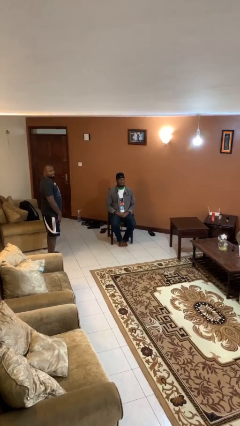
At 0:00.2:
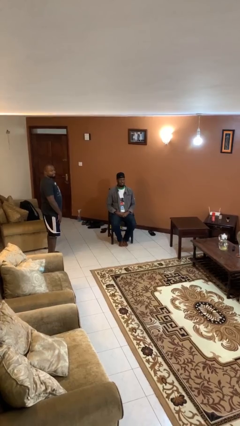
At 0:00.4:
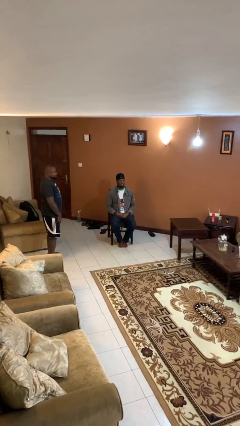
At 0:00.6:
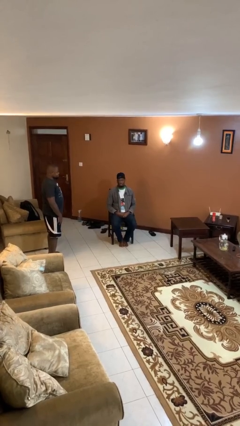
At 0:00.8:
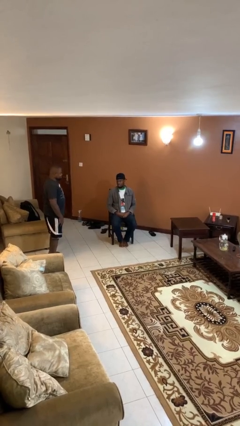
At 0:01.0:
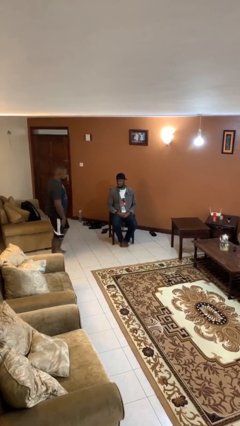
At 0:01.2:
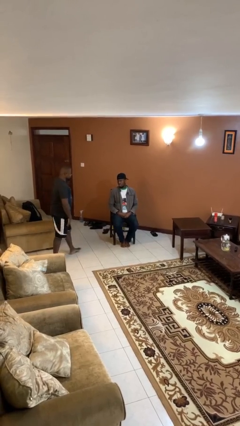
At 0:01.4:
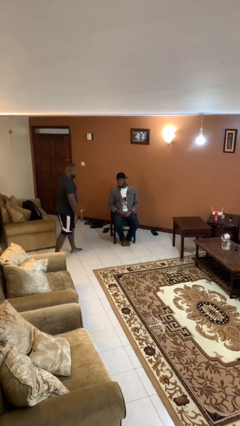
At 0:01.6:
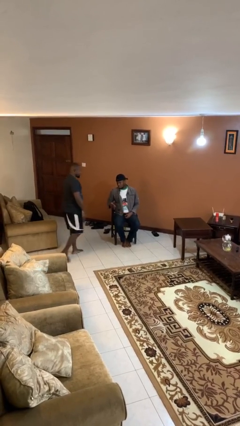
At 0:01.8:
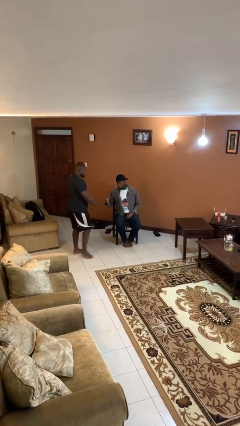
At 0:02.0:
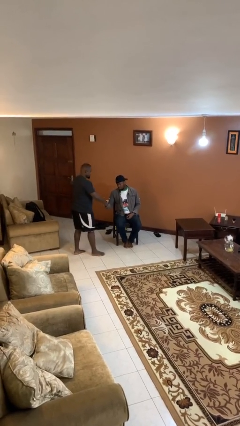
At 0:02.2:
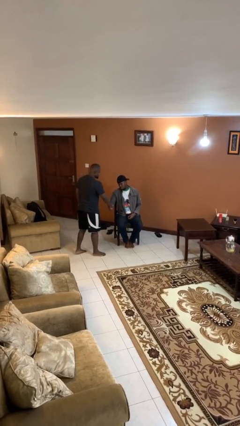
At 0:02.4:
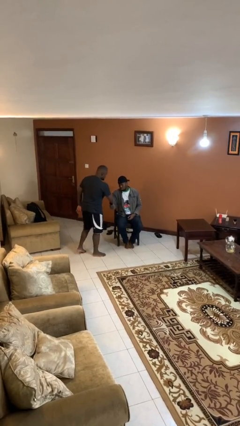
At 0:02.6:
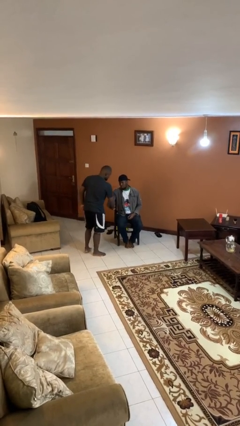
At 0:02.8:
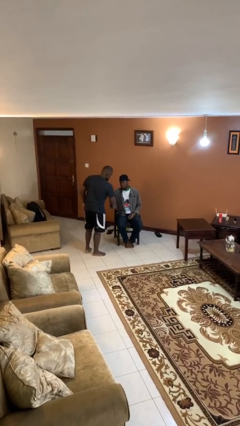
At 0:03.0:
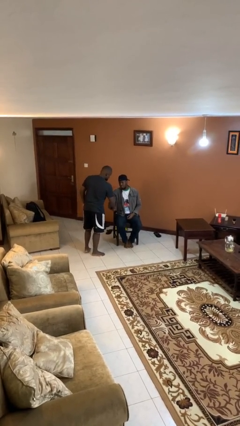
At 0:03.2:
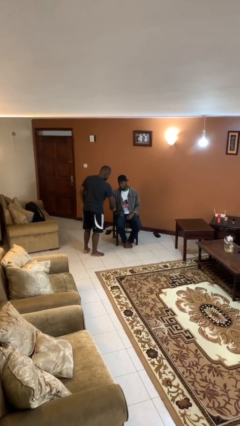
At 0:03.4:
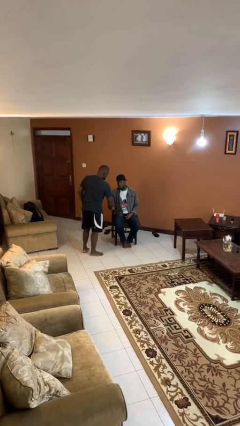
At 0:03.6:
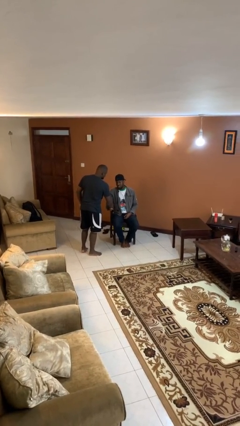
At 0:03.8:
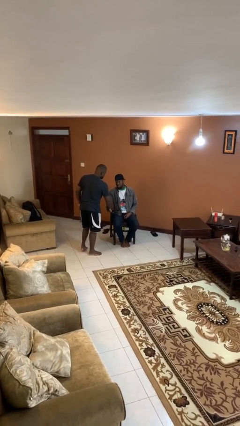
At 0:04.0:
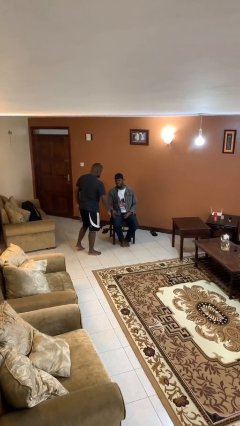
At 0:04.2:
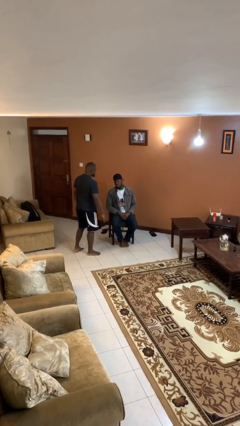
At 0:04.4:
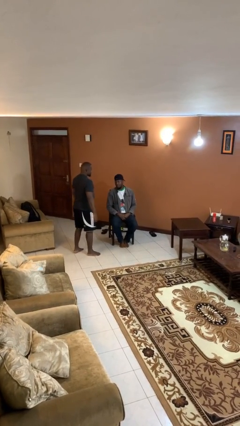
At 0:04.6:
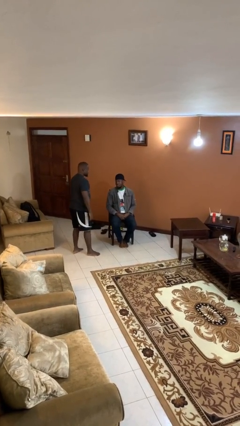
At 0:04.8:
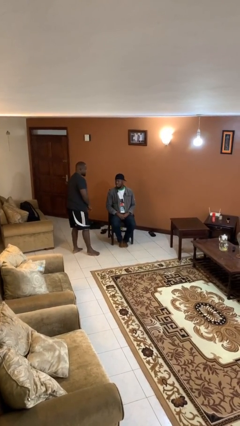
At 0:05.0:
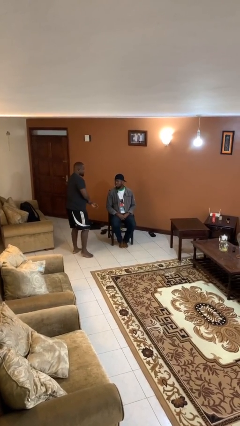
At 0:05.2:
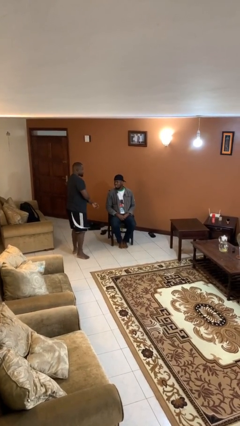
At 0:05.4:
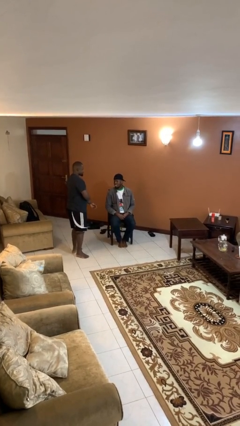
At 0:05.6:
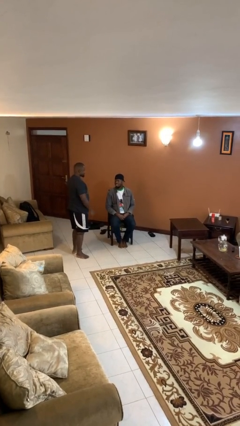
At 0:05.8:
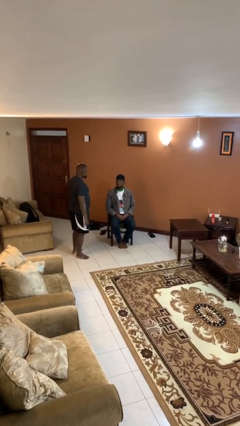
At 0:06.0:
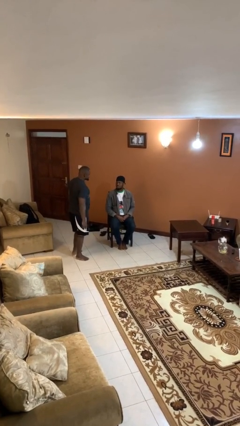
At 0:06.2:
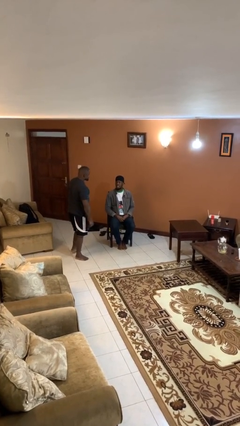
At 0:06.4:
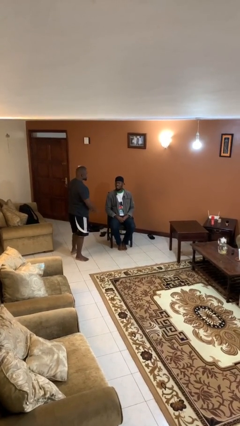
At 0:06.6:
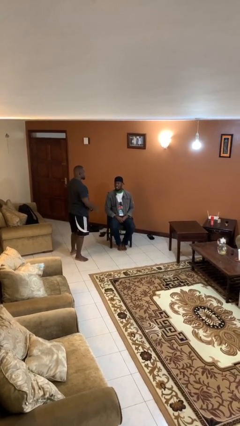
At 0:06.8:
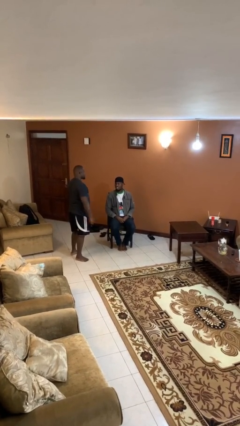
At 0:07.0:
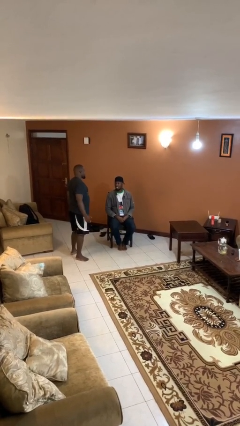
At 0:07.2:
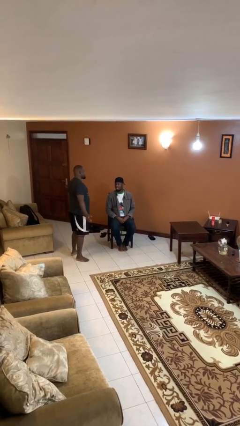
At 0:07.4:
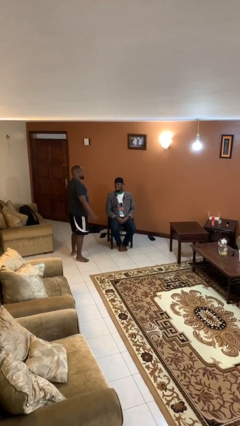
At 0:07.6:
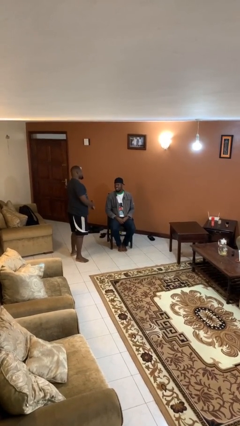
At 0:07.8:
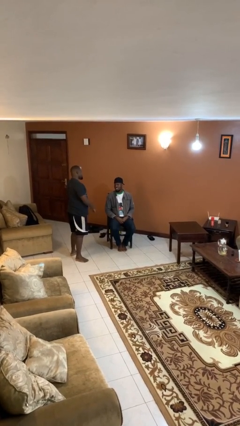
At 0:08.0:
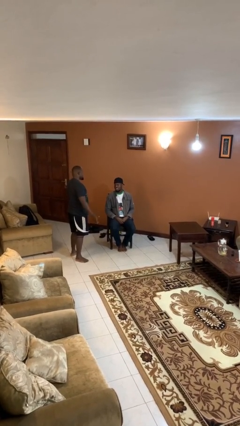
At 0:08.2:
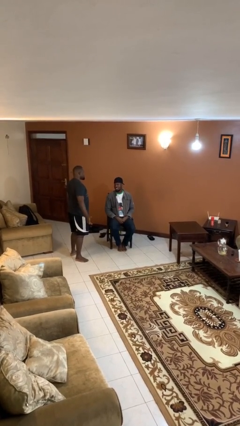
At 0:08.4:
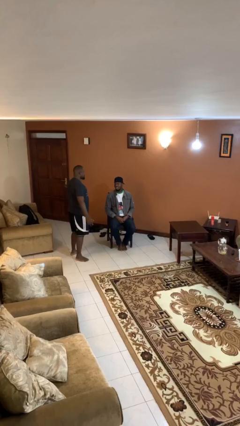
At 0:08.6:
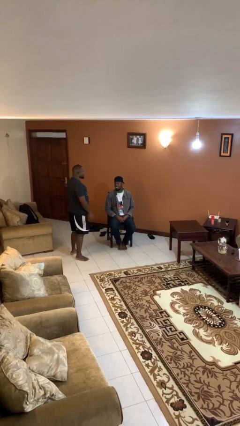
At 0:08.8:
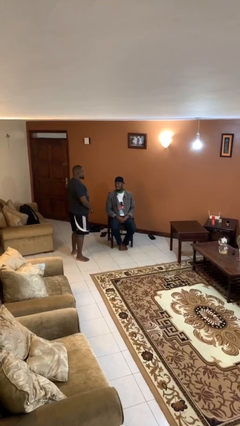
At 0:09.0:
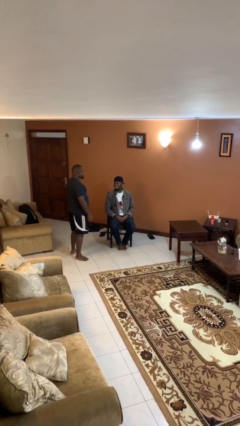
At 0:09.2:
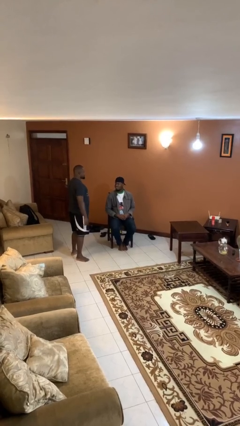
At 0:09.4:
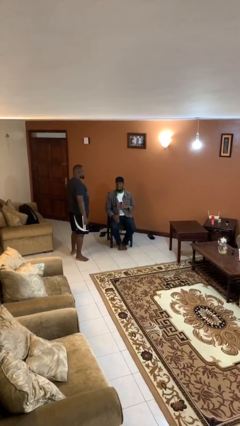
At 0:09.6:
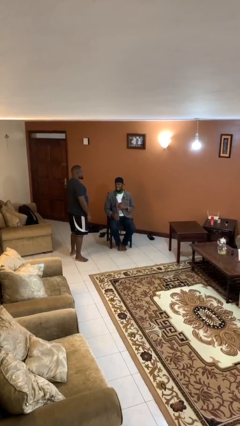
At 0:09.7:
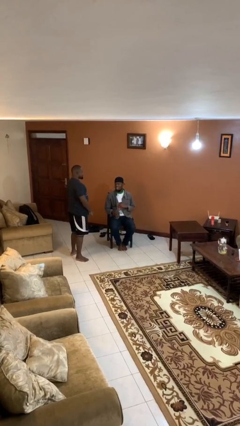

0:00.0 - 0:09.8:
person shakes hand

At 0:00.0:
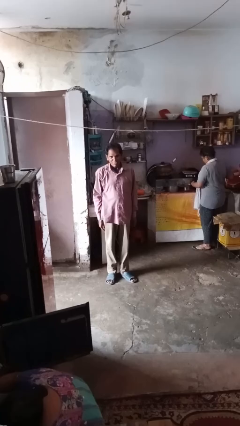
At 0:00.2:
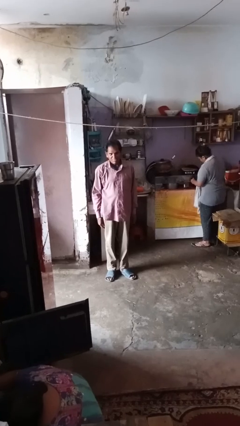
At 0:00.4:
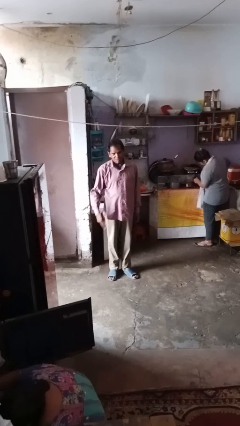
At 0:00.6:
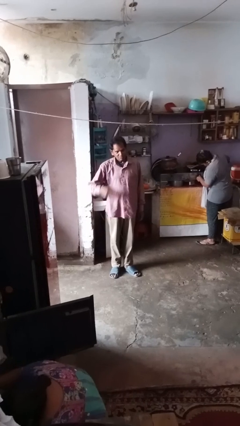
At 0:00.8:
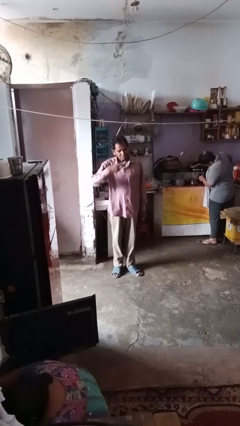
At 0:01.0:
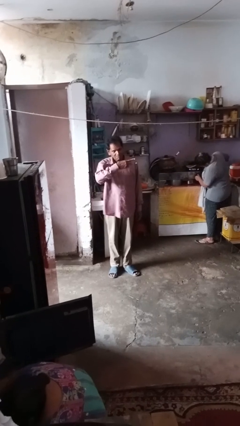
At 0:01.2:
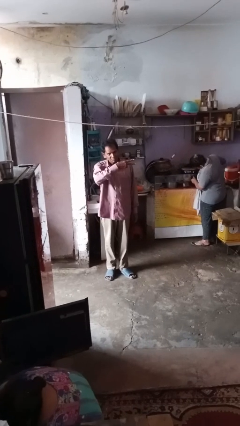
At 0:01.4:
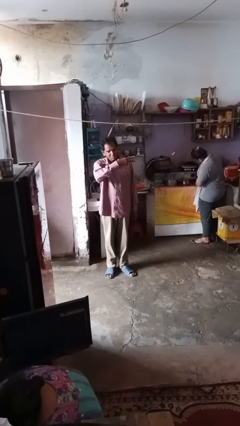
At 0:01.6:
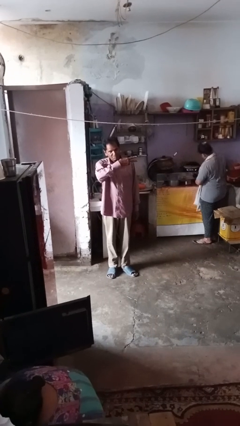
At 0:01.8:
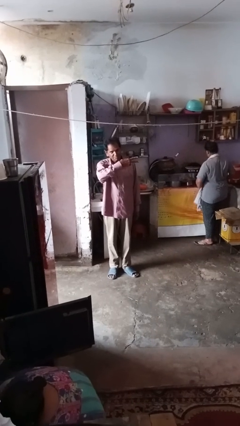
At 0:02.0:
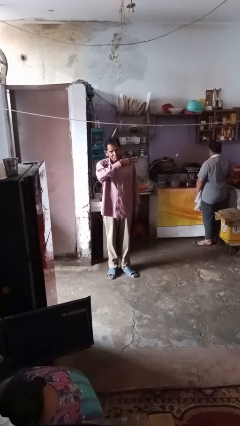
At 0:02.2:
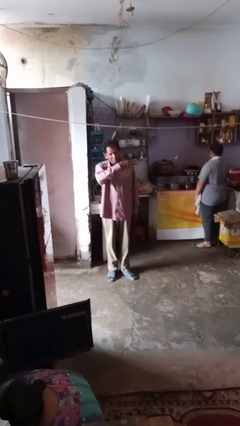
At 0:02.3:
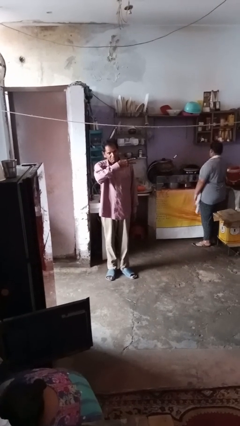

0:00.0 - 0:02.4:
person gestures behind me

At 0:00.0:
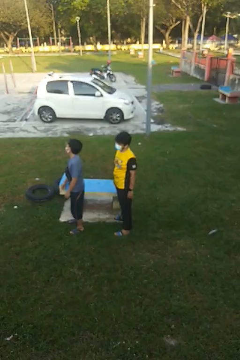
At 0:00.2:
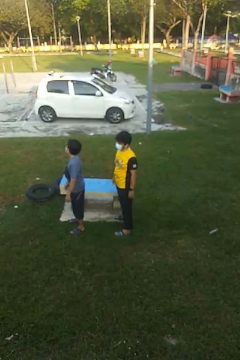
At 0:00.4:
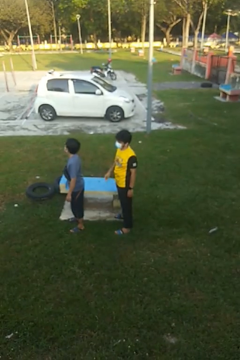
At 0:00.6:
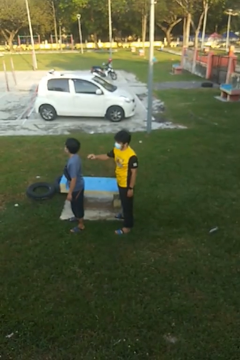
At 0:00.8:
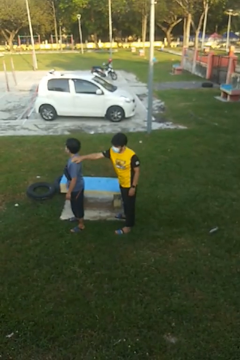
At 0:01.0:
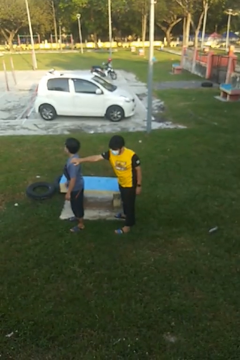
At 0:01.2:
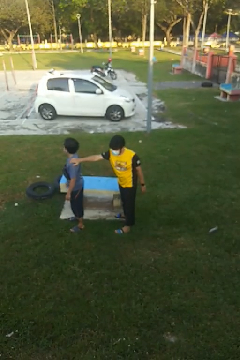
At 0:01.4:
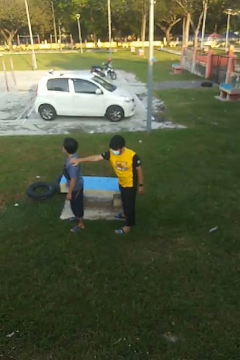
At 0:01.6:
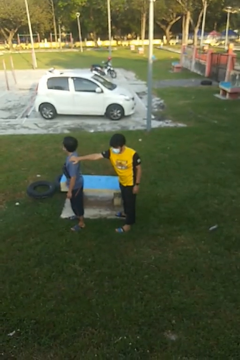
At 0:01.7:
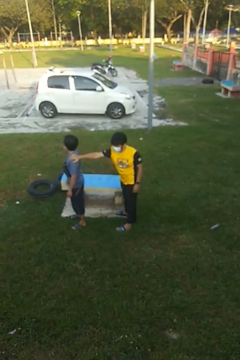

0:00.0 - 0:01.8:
person grabs person by shoulder

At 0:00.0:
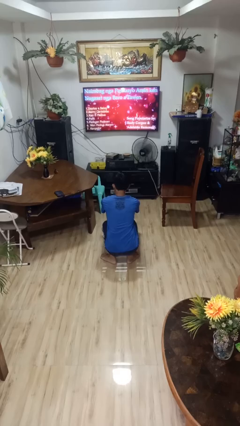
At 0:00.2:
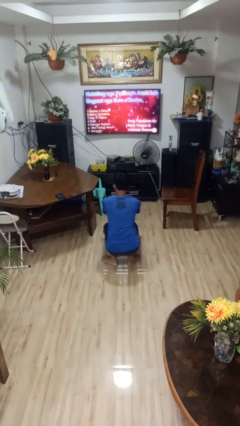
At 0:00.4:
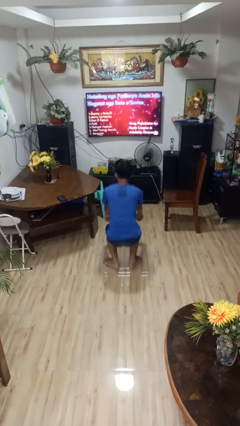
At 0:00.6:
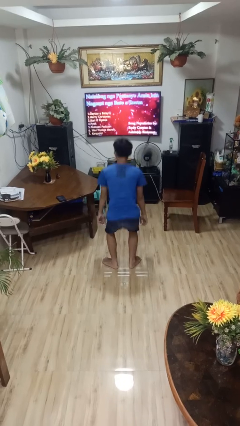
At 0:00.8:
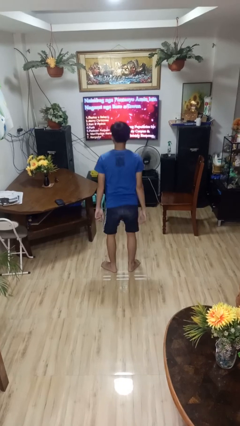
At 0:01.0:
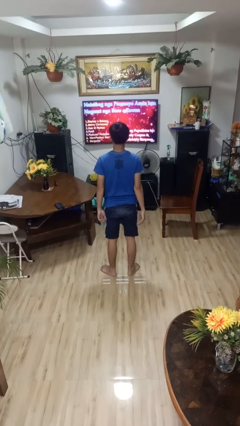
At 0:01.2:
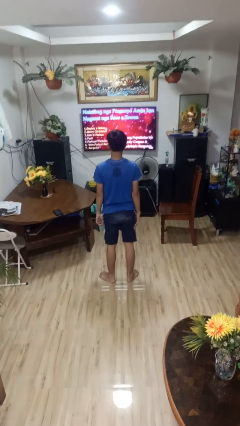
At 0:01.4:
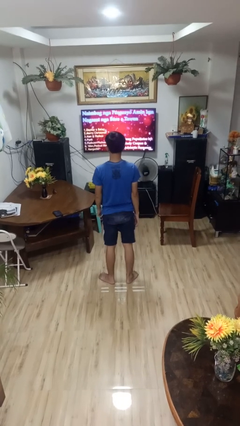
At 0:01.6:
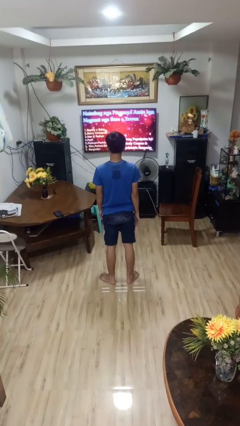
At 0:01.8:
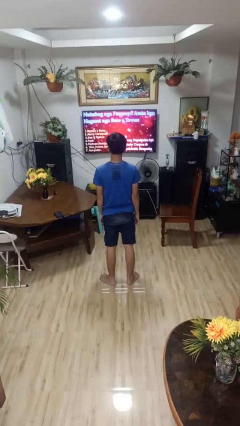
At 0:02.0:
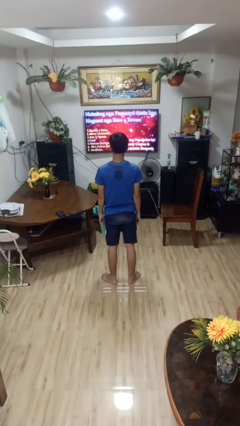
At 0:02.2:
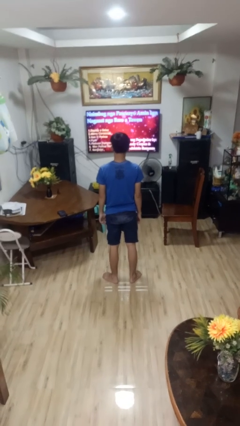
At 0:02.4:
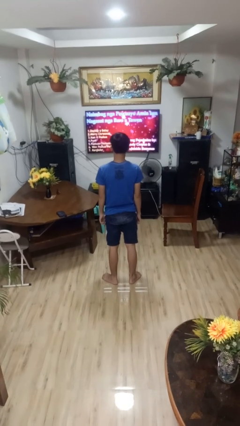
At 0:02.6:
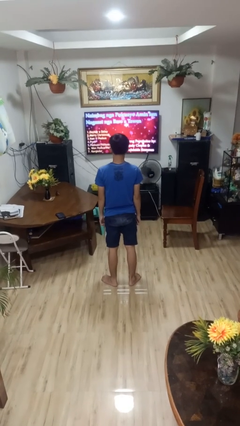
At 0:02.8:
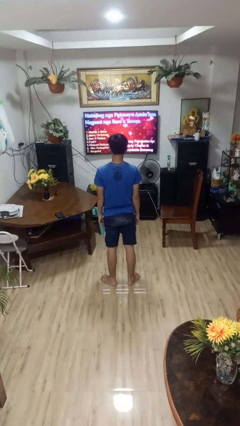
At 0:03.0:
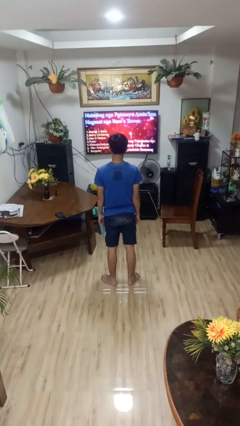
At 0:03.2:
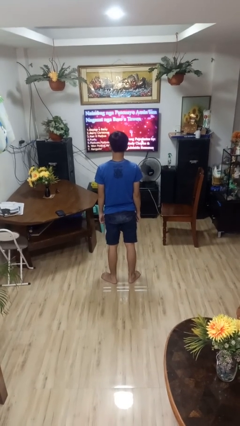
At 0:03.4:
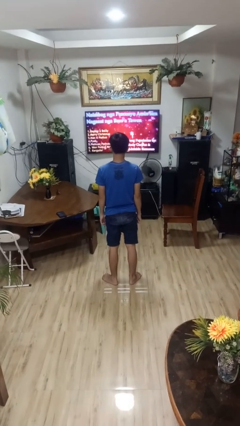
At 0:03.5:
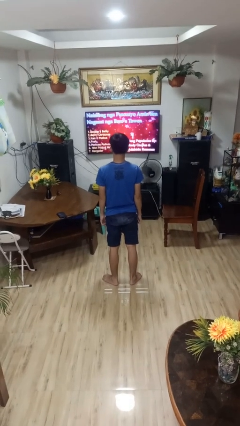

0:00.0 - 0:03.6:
person stands up

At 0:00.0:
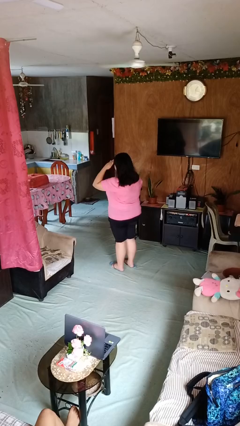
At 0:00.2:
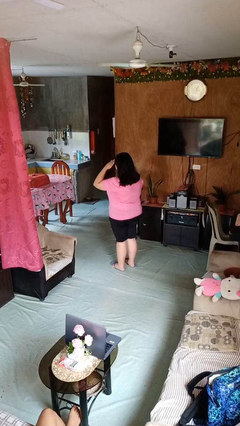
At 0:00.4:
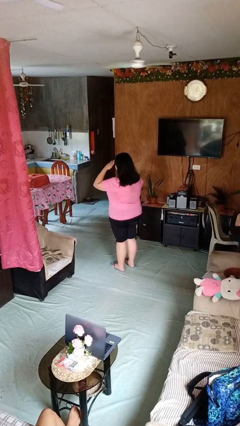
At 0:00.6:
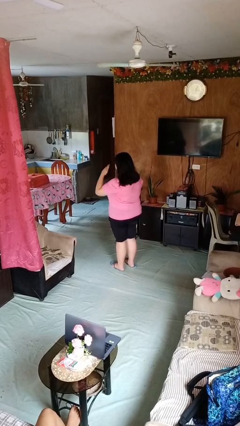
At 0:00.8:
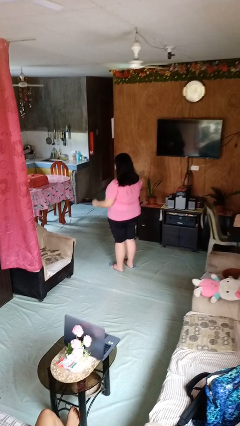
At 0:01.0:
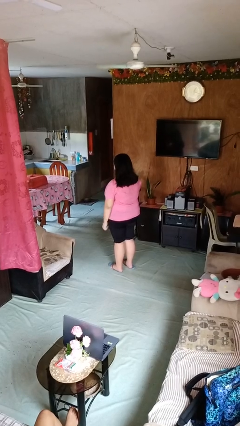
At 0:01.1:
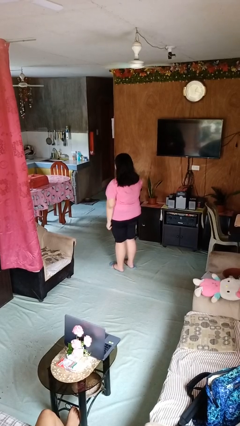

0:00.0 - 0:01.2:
person salutes
